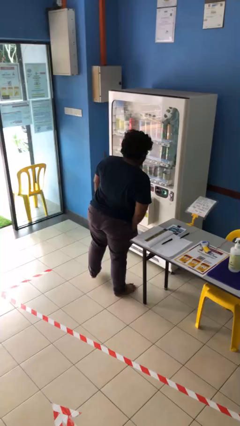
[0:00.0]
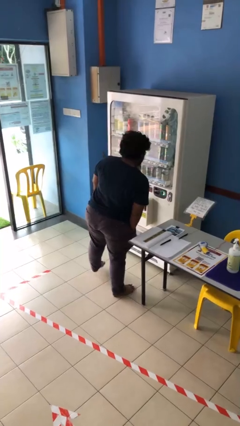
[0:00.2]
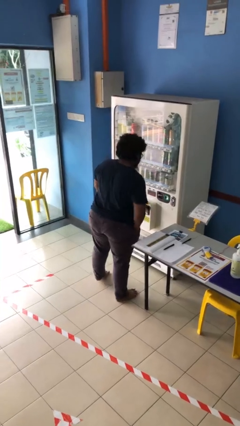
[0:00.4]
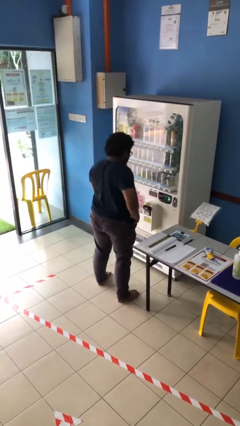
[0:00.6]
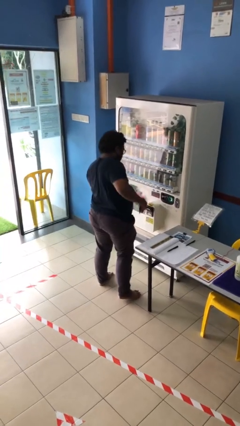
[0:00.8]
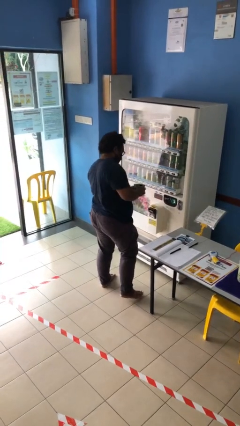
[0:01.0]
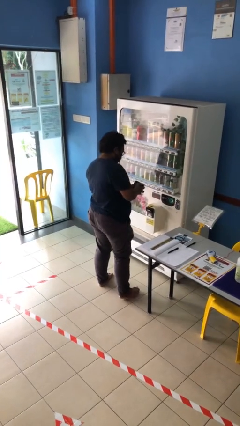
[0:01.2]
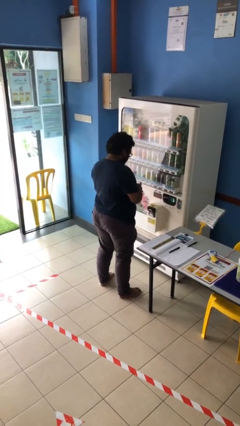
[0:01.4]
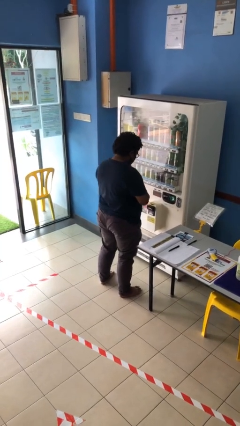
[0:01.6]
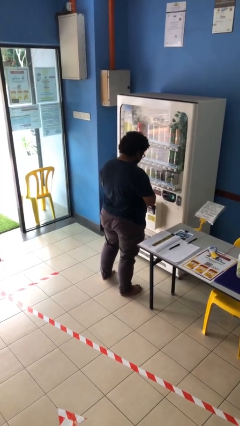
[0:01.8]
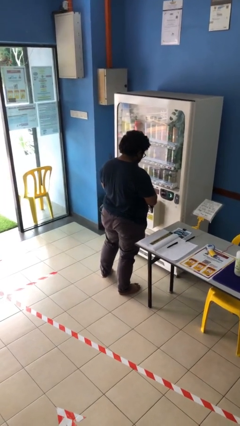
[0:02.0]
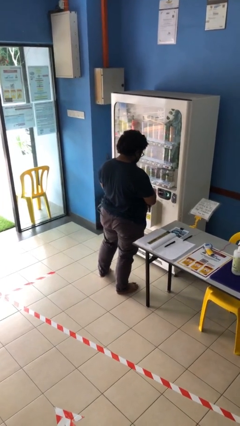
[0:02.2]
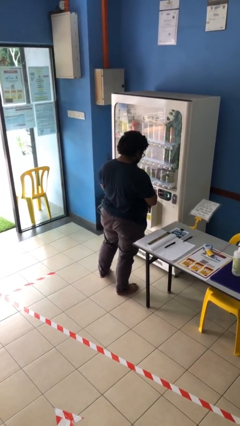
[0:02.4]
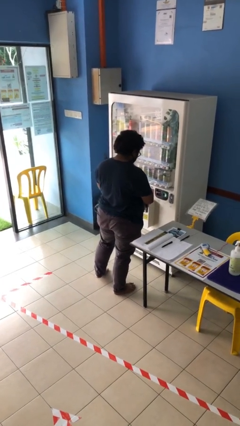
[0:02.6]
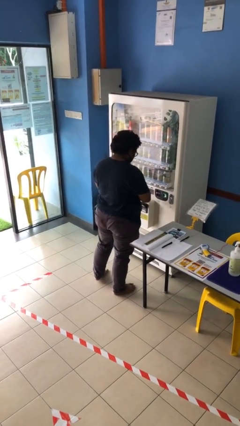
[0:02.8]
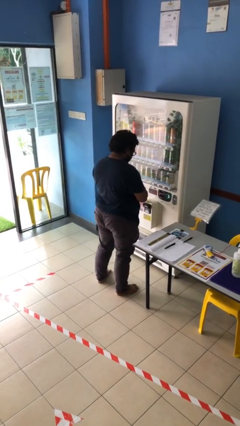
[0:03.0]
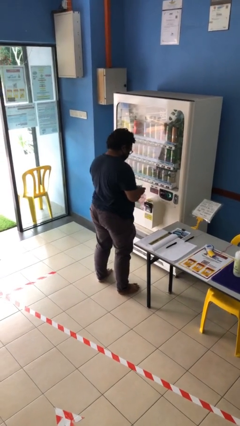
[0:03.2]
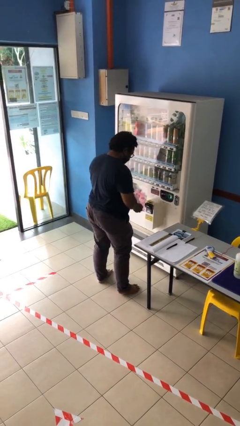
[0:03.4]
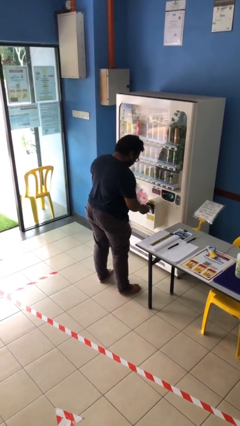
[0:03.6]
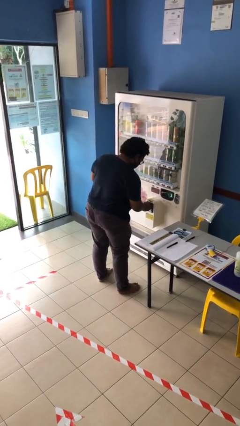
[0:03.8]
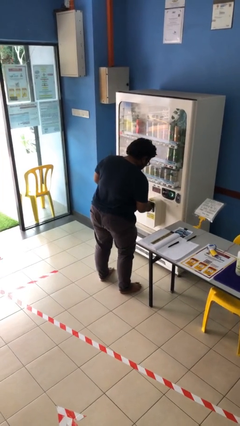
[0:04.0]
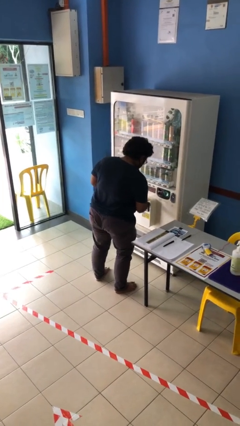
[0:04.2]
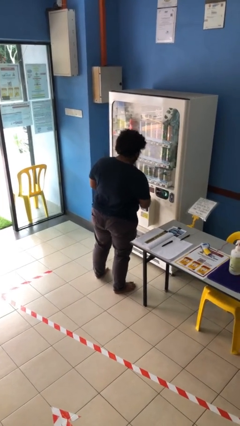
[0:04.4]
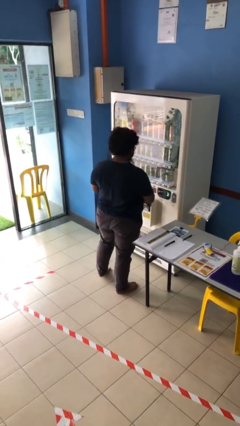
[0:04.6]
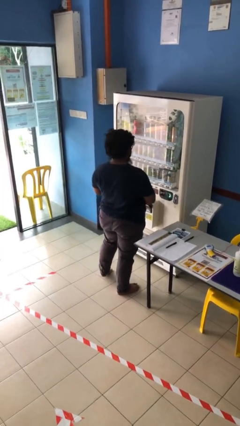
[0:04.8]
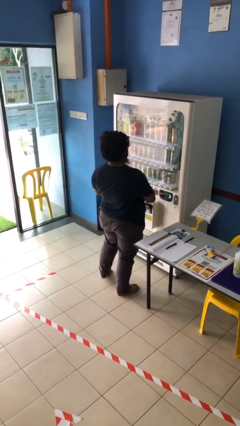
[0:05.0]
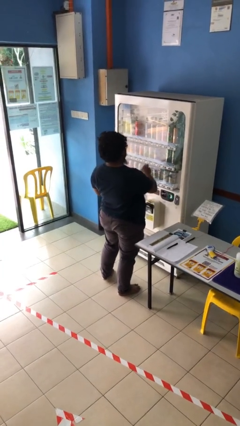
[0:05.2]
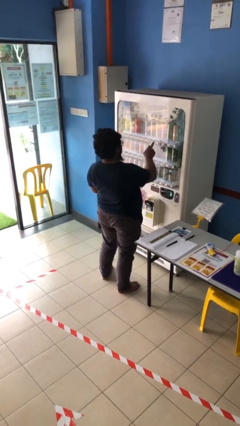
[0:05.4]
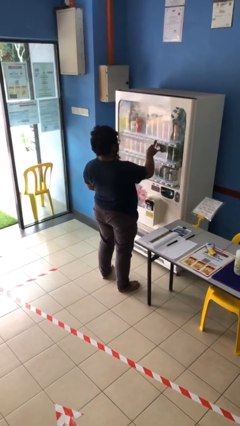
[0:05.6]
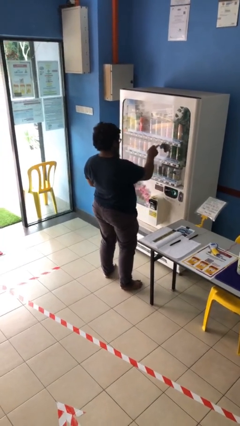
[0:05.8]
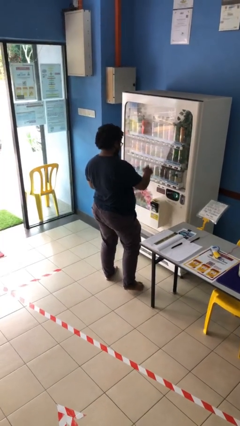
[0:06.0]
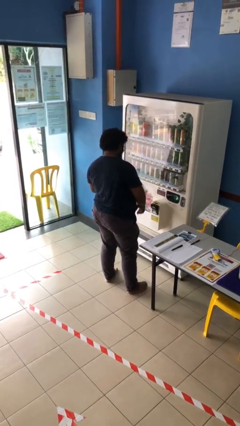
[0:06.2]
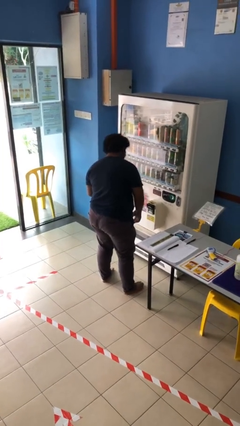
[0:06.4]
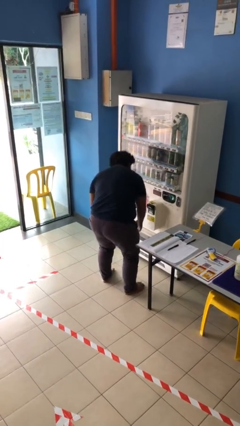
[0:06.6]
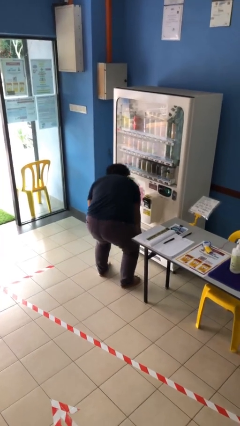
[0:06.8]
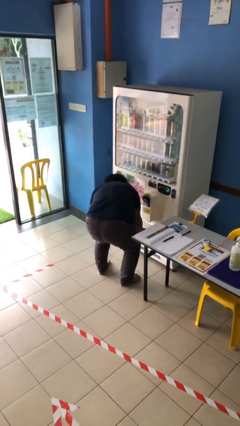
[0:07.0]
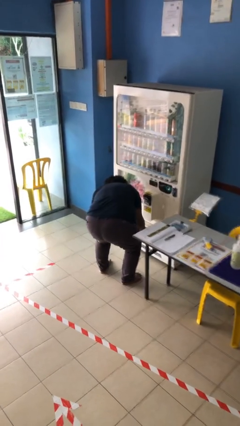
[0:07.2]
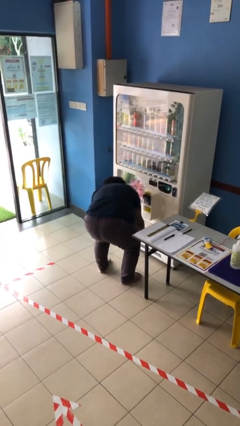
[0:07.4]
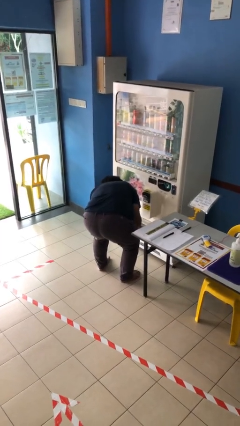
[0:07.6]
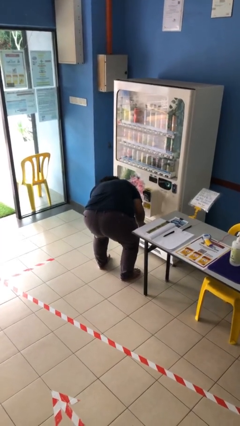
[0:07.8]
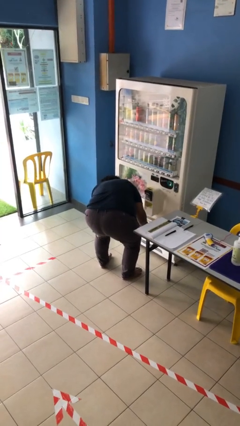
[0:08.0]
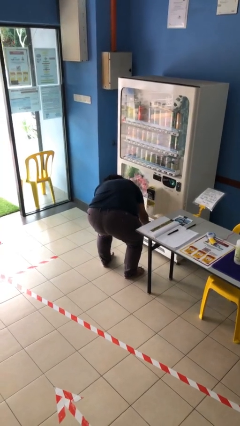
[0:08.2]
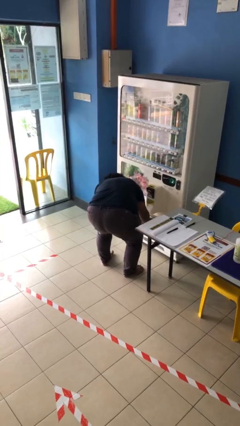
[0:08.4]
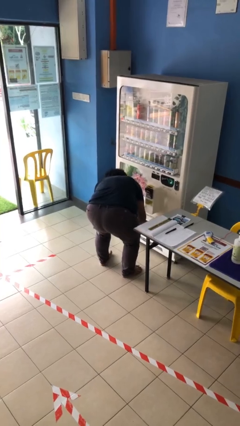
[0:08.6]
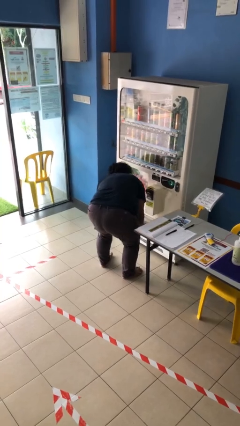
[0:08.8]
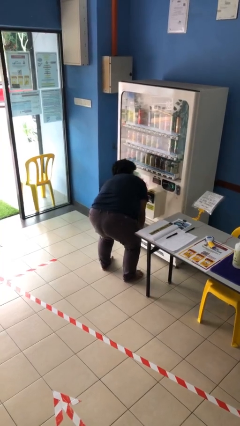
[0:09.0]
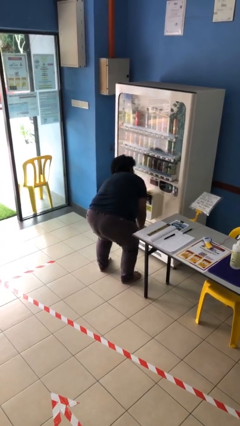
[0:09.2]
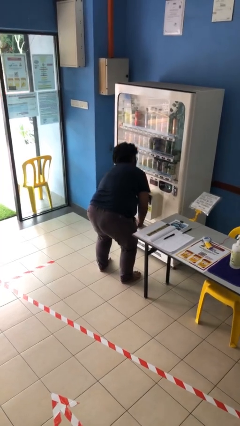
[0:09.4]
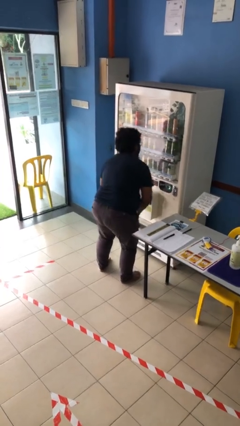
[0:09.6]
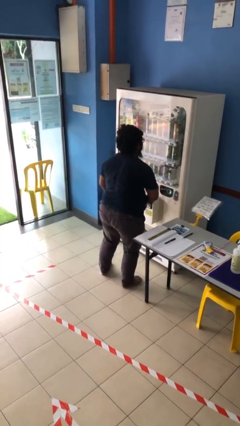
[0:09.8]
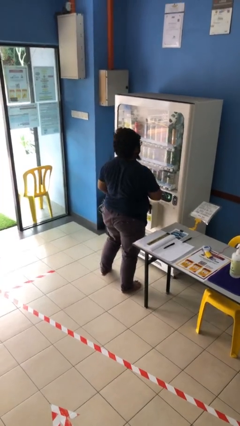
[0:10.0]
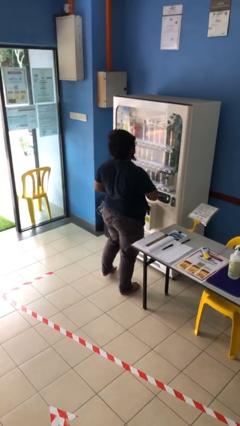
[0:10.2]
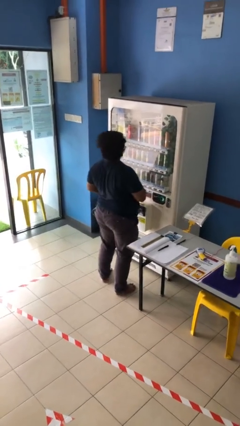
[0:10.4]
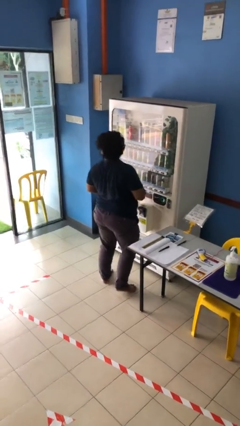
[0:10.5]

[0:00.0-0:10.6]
person purchases from machine

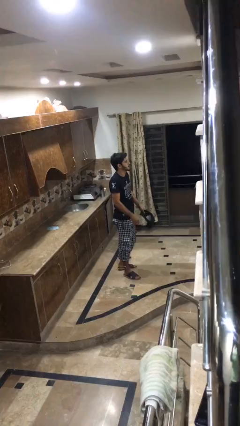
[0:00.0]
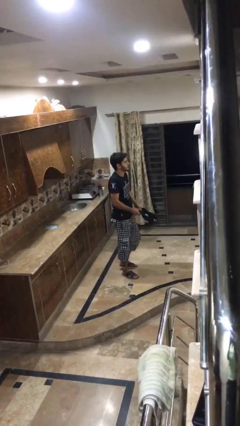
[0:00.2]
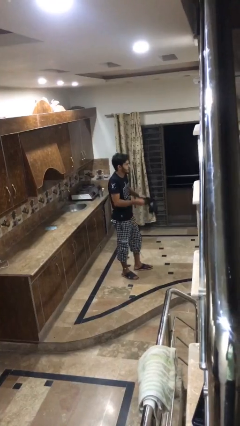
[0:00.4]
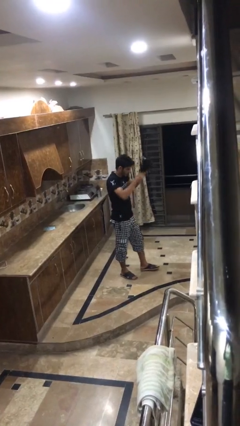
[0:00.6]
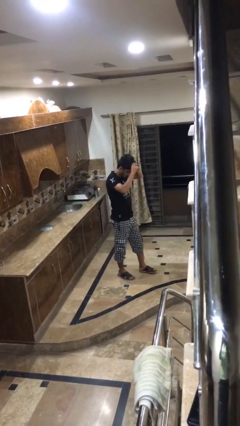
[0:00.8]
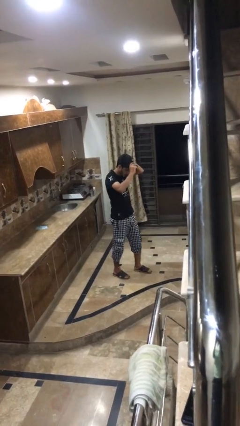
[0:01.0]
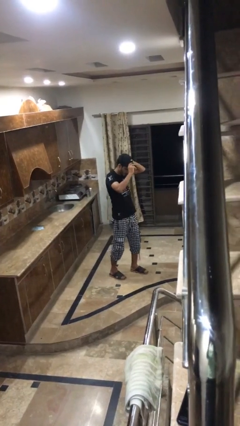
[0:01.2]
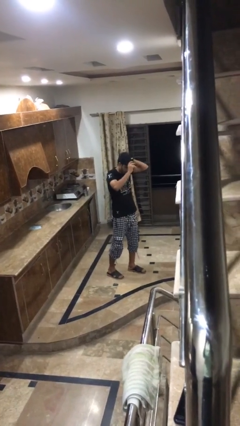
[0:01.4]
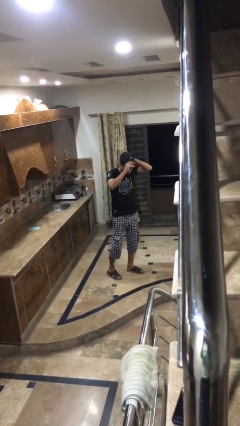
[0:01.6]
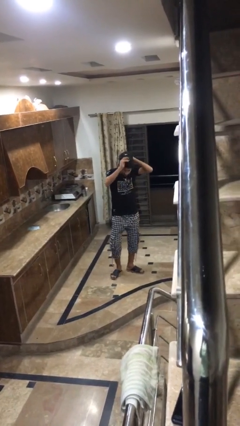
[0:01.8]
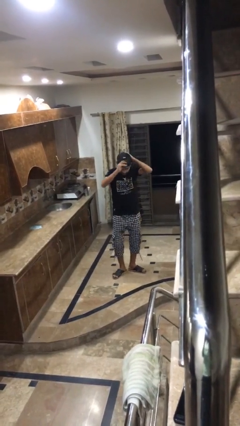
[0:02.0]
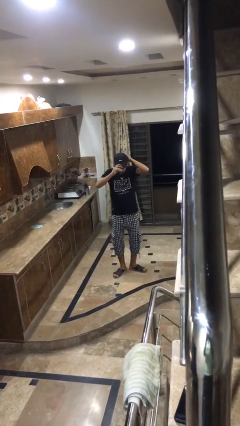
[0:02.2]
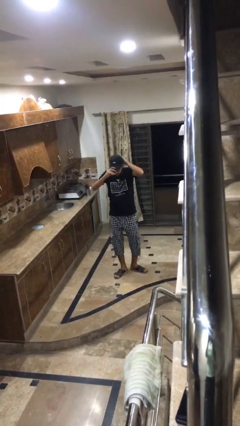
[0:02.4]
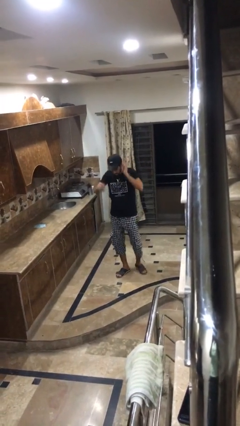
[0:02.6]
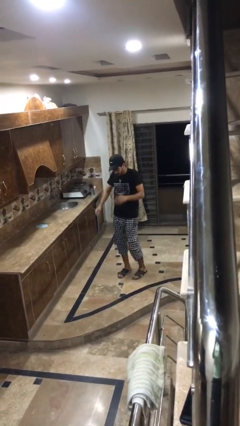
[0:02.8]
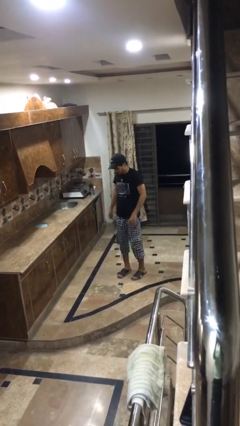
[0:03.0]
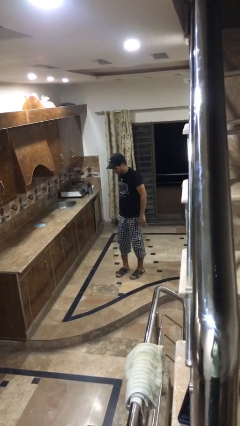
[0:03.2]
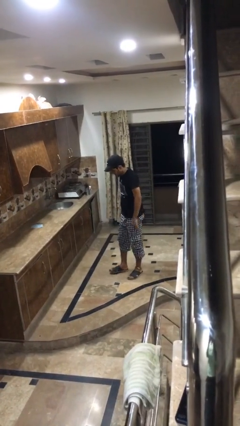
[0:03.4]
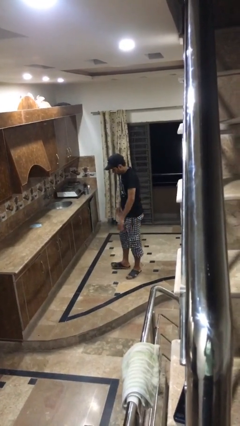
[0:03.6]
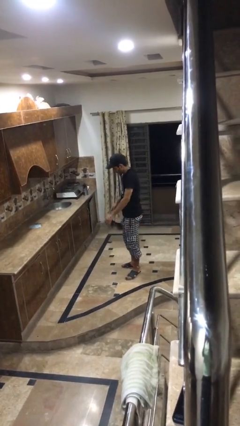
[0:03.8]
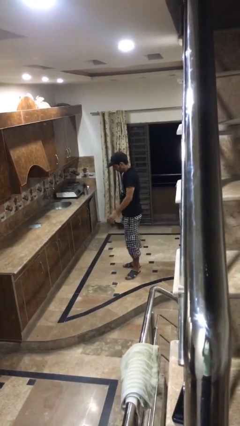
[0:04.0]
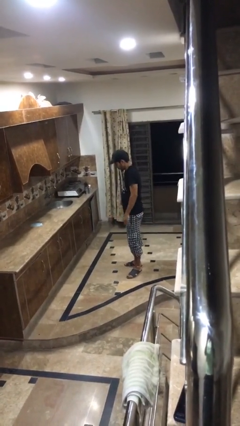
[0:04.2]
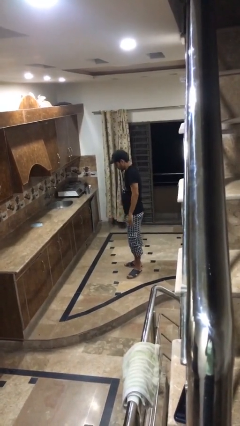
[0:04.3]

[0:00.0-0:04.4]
person puts on hat

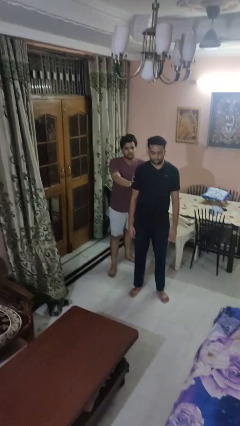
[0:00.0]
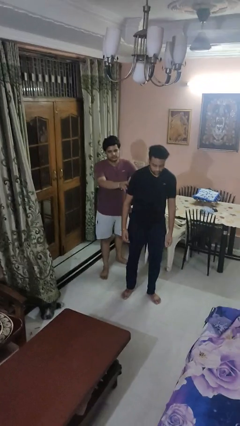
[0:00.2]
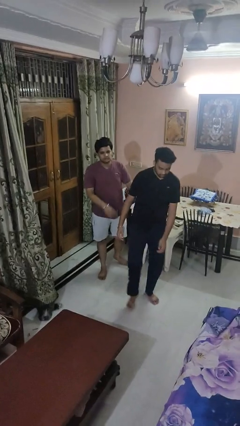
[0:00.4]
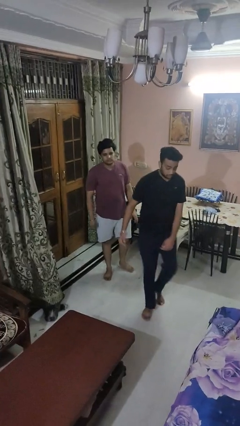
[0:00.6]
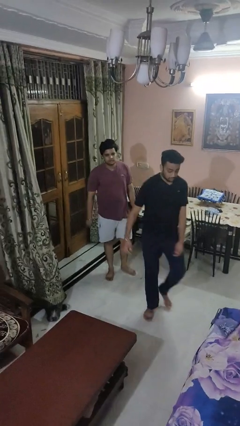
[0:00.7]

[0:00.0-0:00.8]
person shoves person

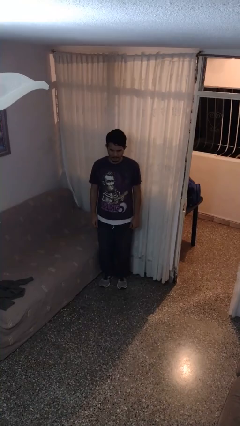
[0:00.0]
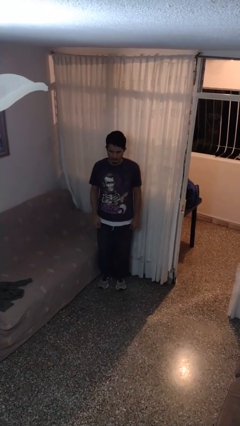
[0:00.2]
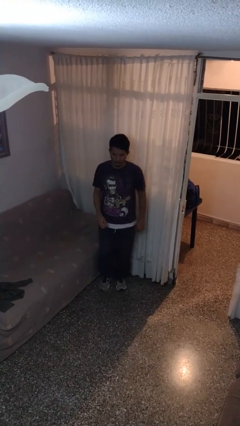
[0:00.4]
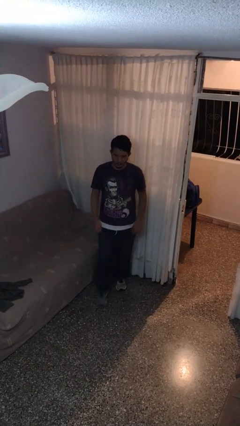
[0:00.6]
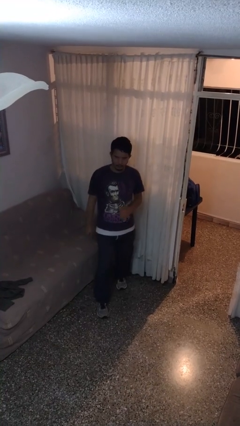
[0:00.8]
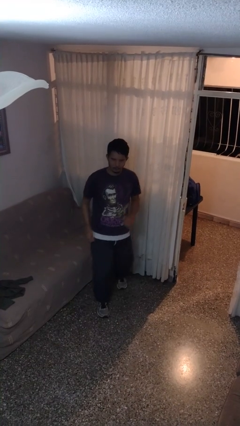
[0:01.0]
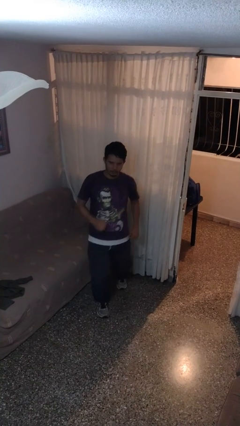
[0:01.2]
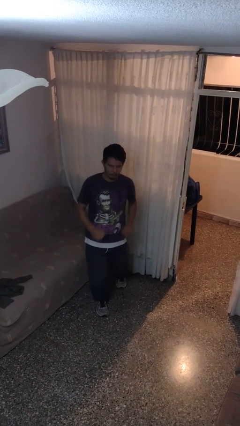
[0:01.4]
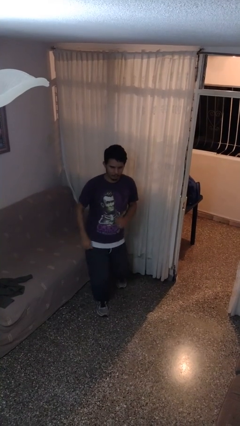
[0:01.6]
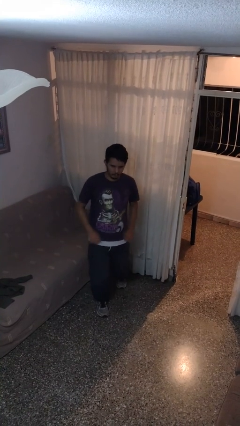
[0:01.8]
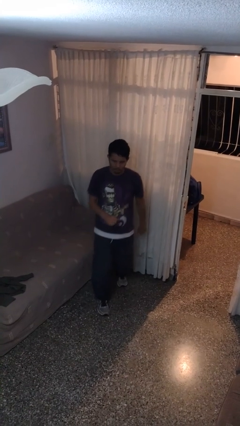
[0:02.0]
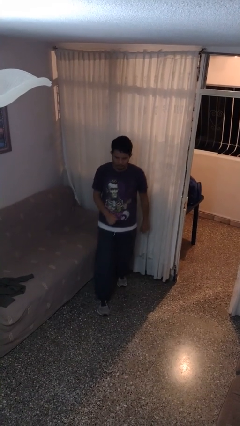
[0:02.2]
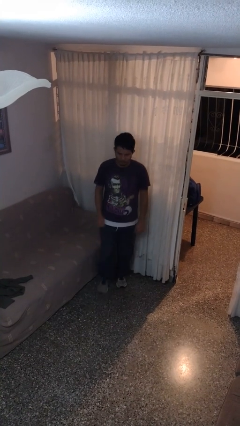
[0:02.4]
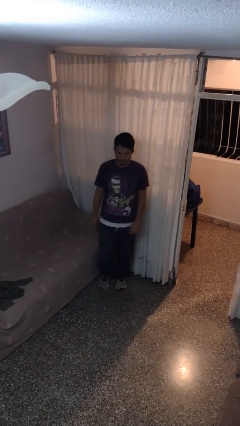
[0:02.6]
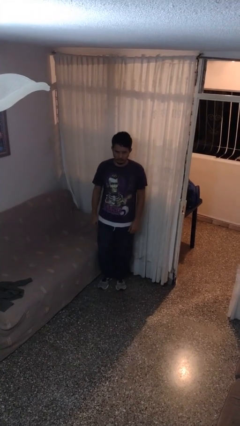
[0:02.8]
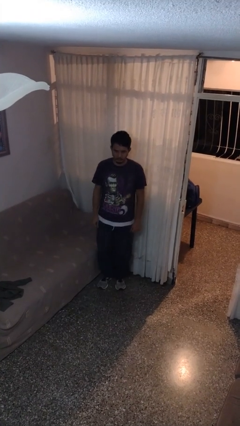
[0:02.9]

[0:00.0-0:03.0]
person dances in place
